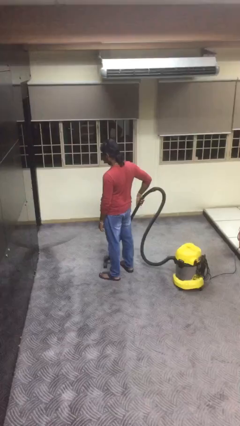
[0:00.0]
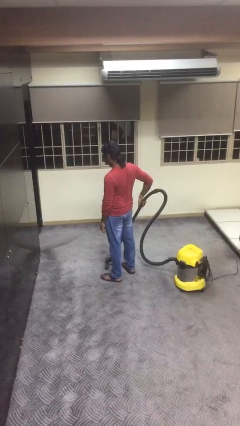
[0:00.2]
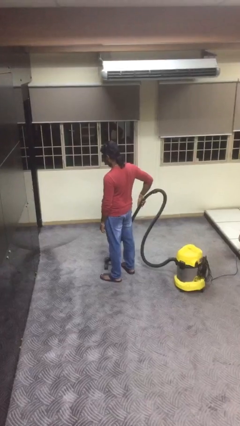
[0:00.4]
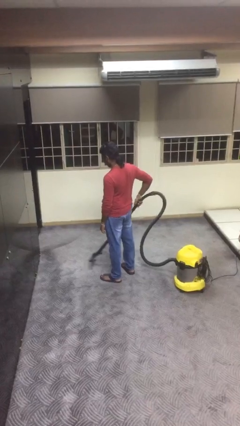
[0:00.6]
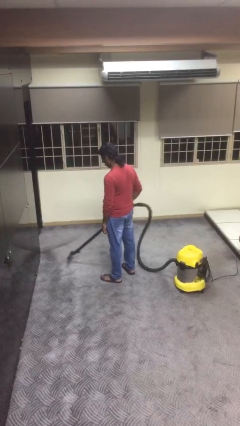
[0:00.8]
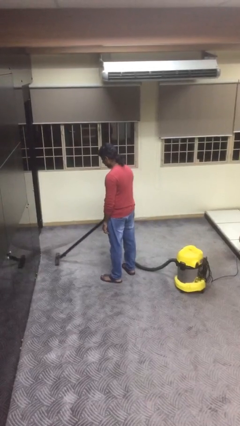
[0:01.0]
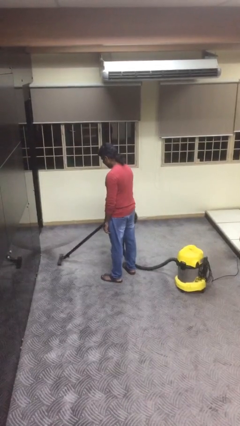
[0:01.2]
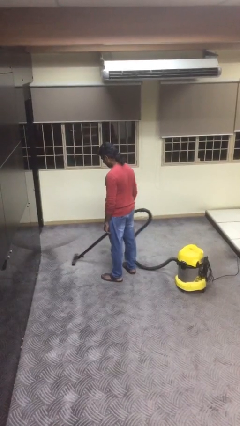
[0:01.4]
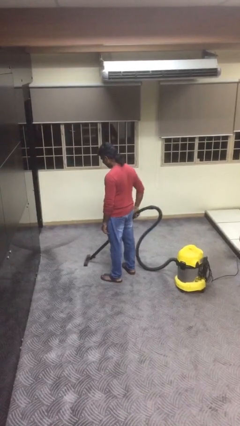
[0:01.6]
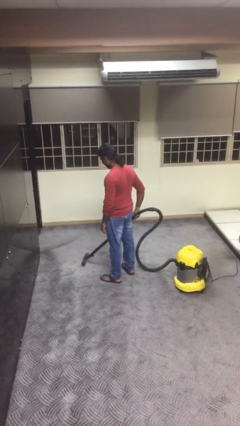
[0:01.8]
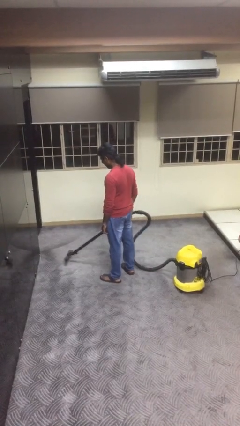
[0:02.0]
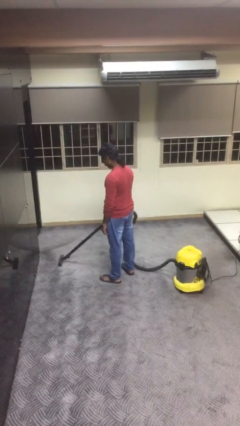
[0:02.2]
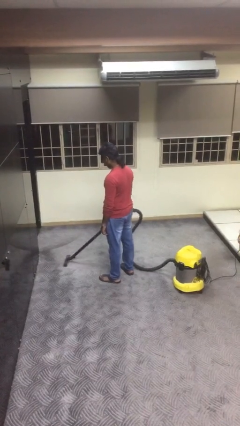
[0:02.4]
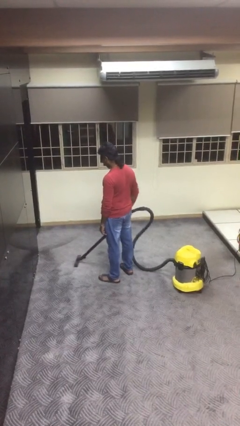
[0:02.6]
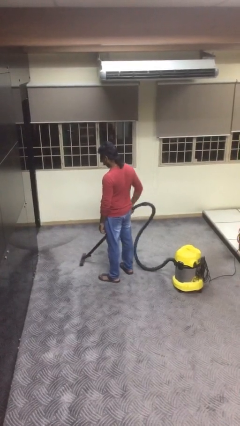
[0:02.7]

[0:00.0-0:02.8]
person vacuums carpet

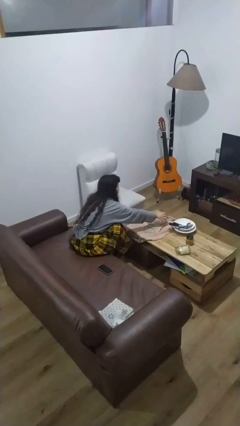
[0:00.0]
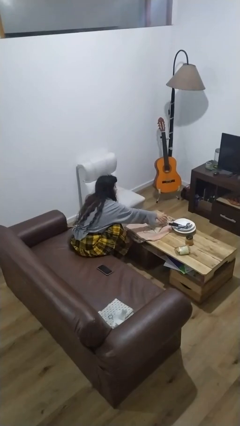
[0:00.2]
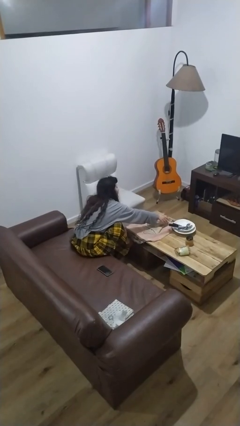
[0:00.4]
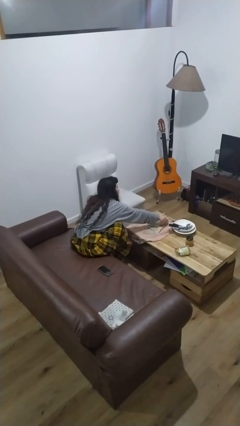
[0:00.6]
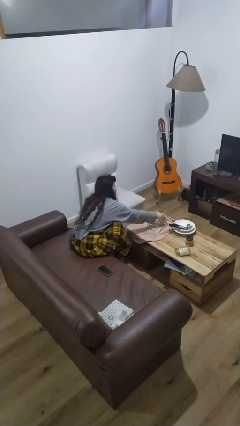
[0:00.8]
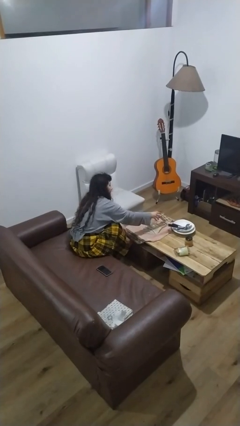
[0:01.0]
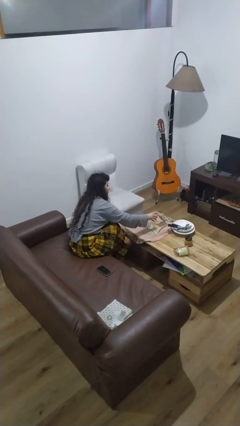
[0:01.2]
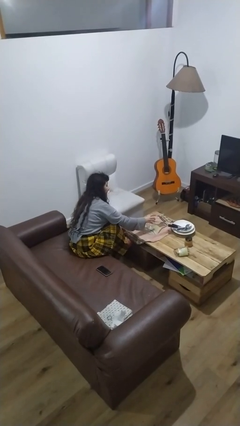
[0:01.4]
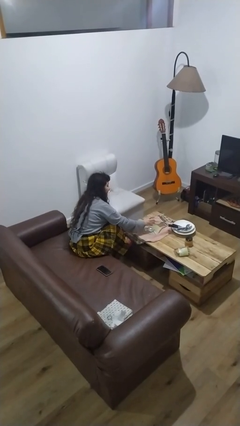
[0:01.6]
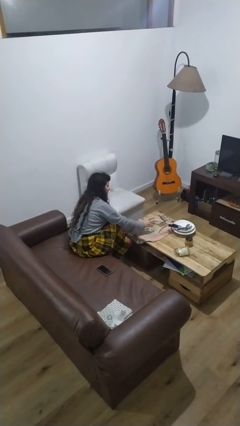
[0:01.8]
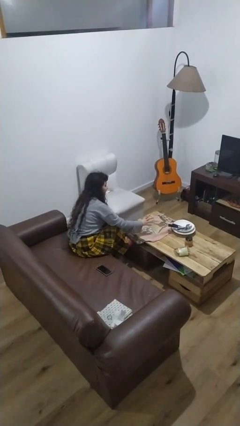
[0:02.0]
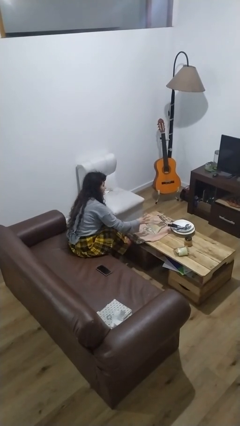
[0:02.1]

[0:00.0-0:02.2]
person sets upright glass

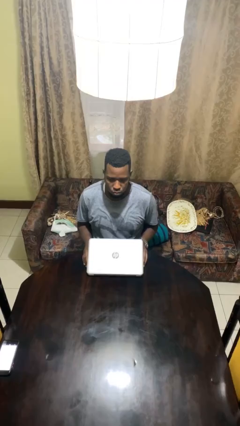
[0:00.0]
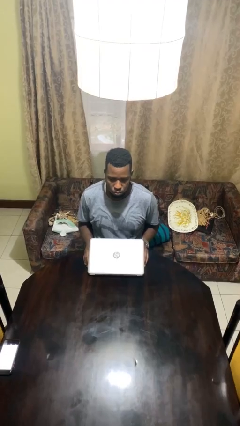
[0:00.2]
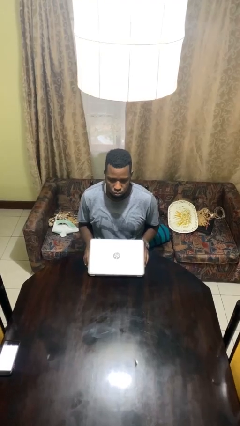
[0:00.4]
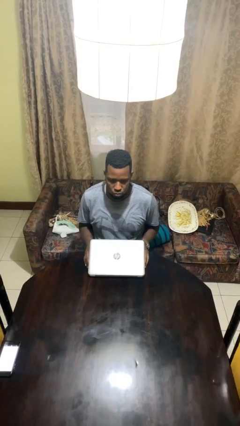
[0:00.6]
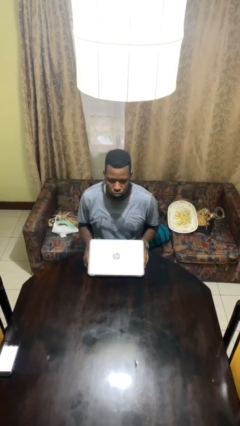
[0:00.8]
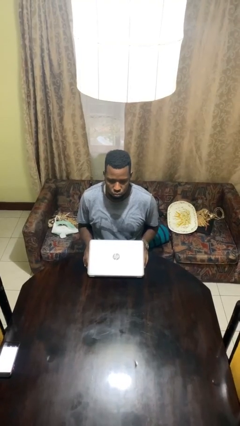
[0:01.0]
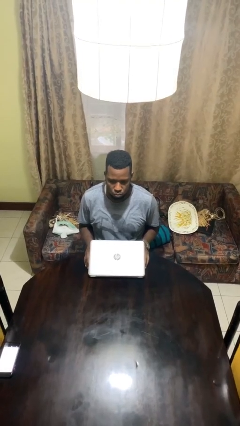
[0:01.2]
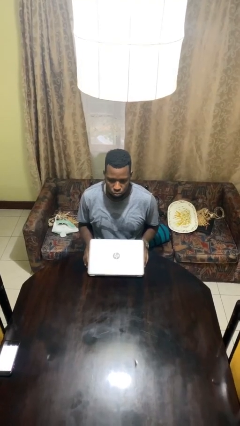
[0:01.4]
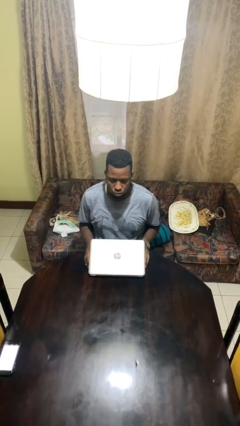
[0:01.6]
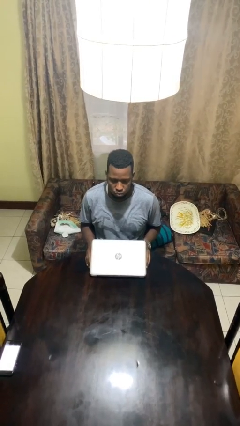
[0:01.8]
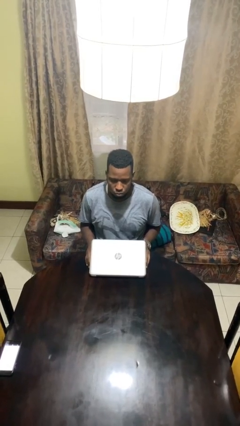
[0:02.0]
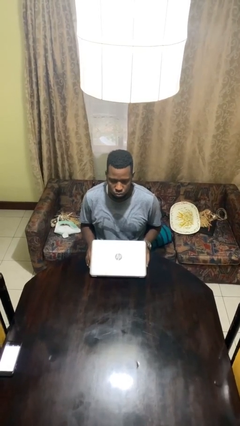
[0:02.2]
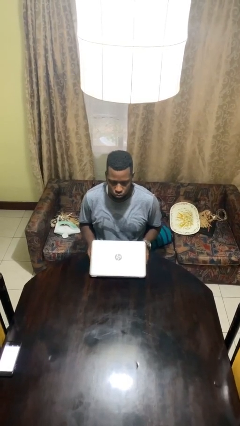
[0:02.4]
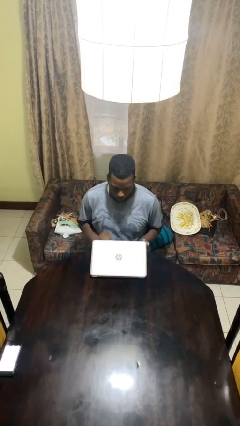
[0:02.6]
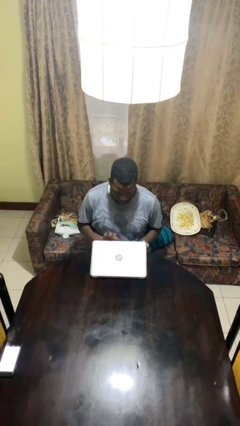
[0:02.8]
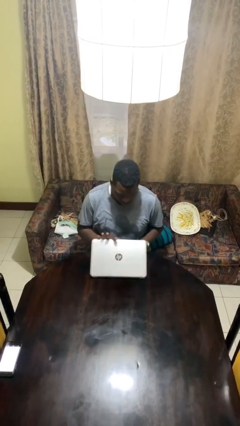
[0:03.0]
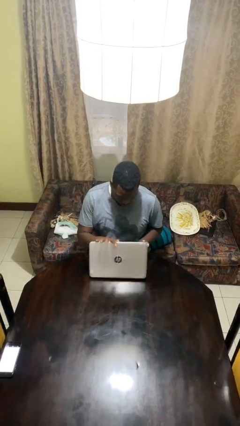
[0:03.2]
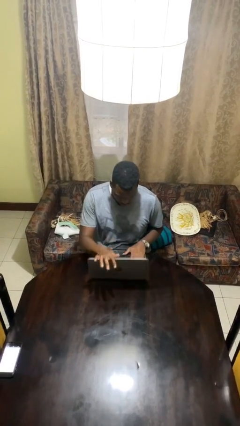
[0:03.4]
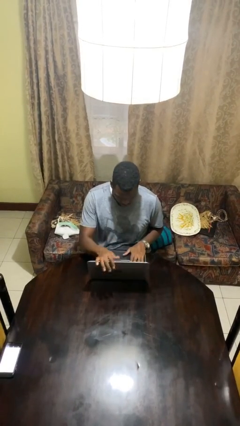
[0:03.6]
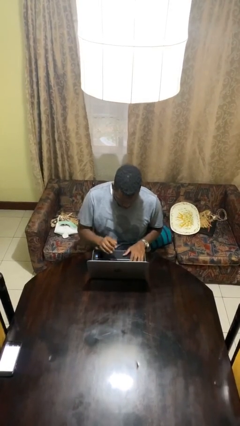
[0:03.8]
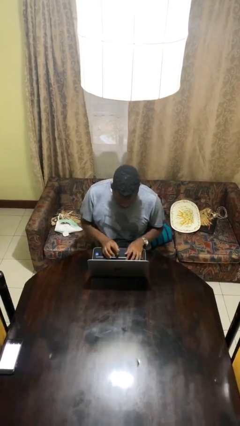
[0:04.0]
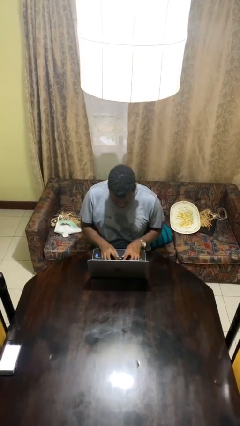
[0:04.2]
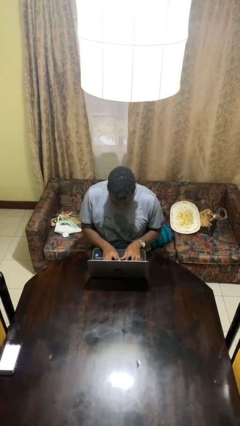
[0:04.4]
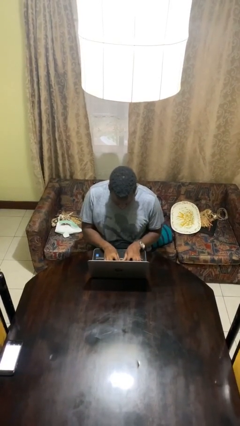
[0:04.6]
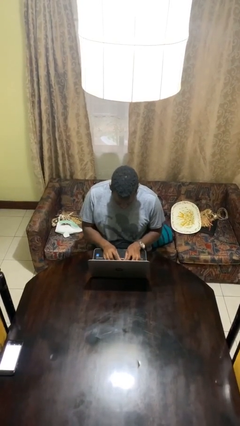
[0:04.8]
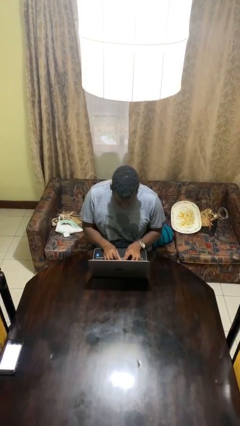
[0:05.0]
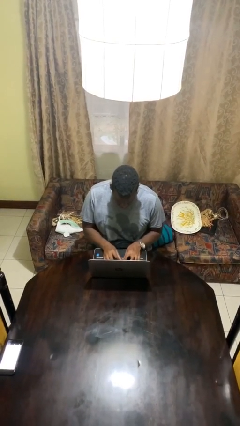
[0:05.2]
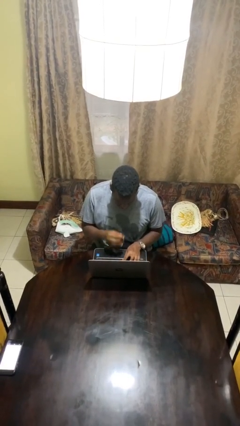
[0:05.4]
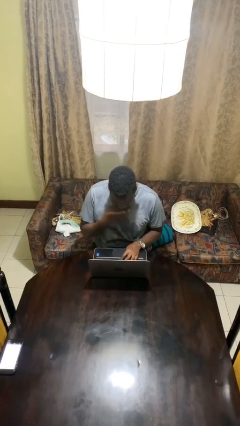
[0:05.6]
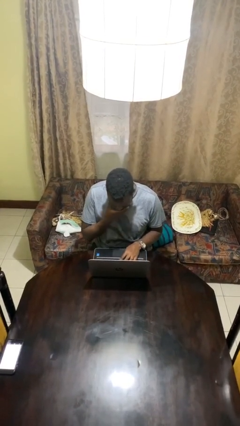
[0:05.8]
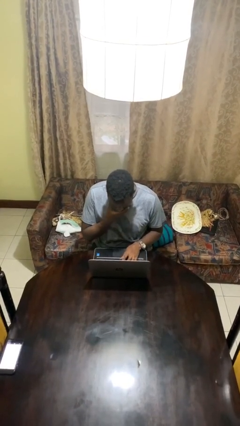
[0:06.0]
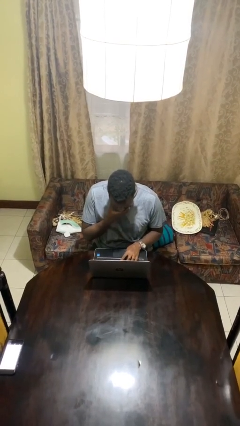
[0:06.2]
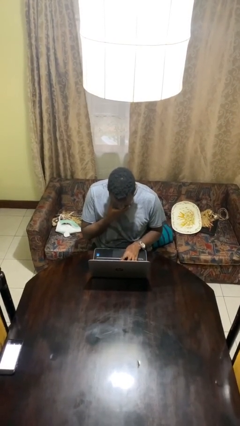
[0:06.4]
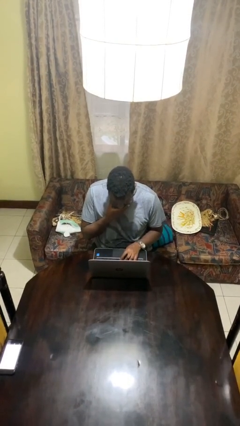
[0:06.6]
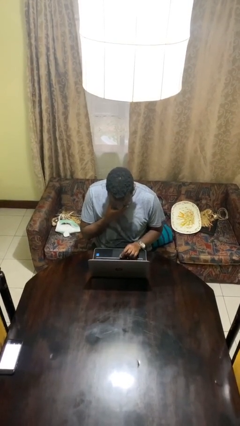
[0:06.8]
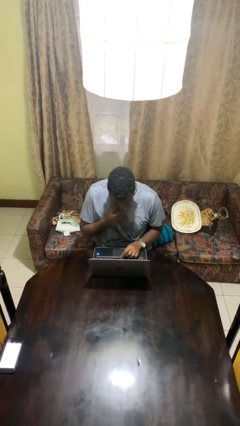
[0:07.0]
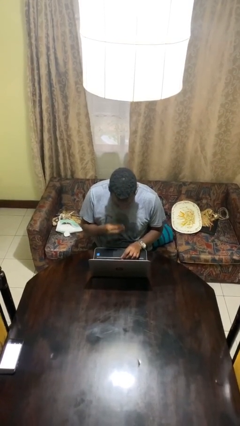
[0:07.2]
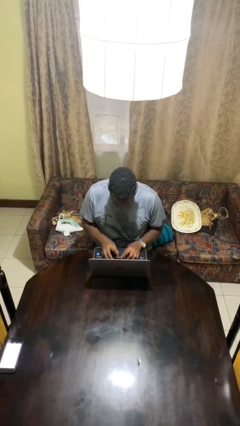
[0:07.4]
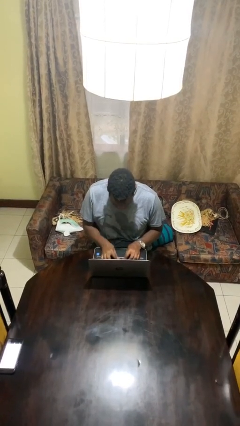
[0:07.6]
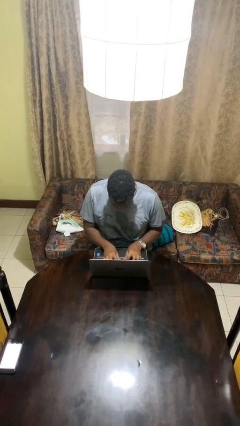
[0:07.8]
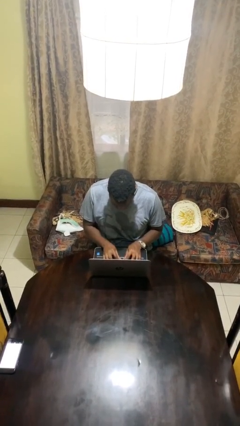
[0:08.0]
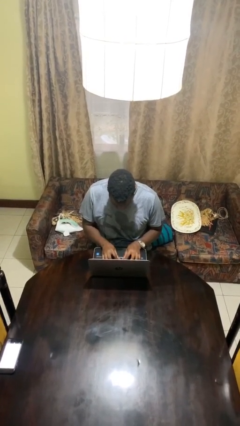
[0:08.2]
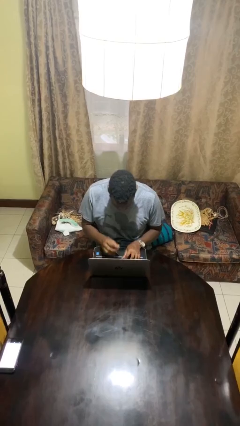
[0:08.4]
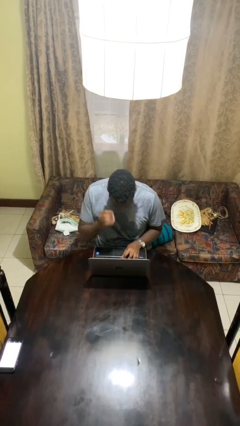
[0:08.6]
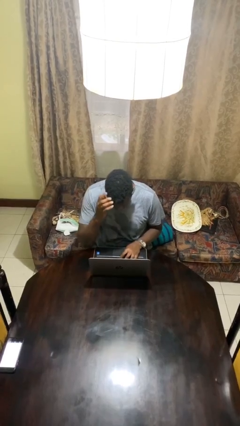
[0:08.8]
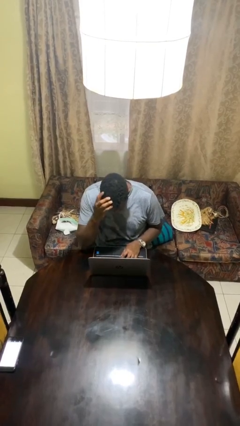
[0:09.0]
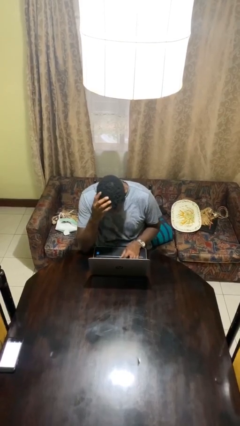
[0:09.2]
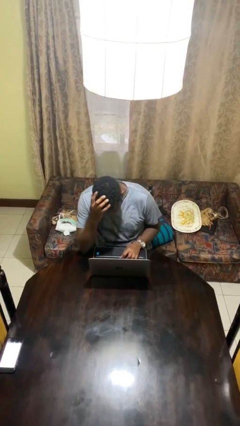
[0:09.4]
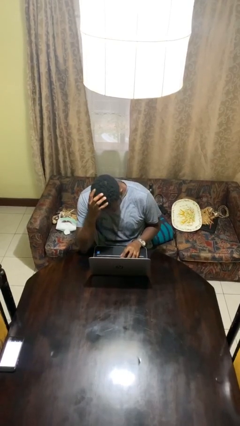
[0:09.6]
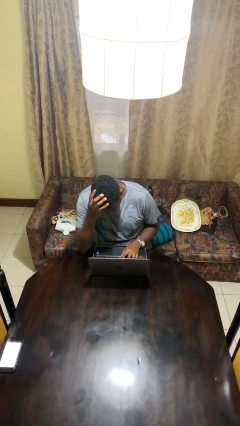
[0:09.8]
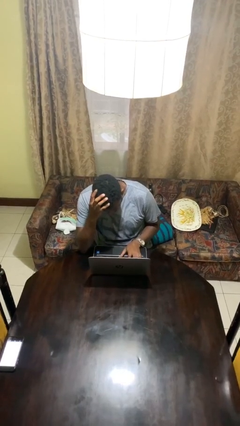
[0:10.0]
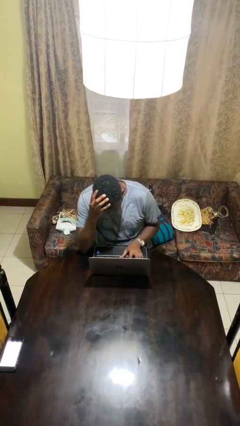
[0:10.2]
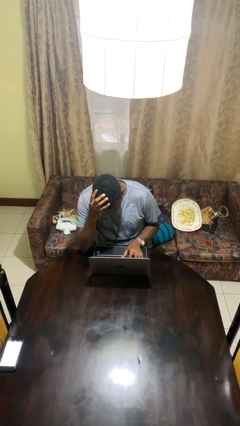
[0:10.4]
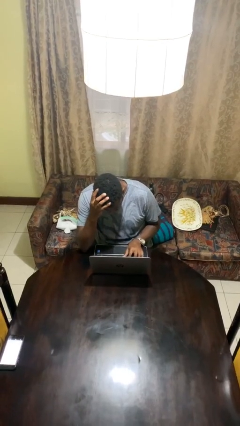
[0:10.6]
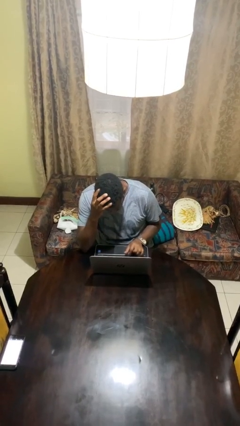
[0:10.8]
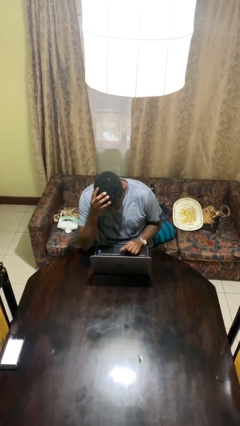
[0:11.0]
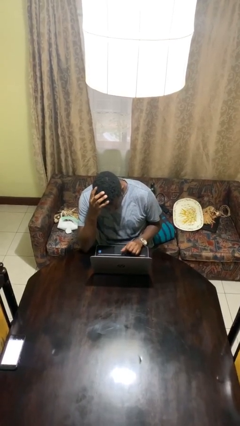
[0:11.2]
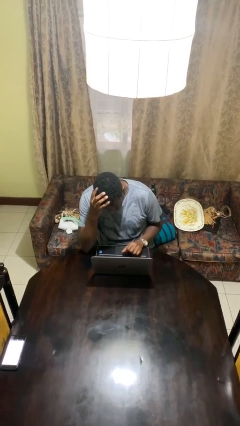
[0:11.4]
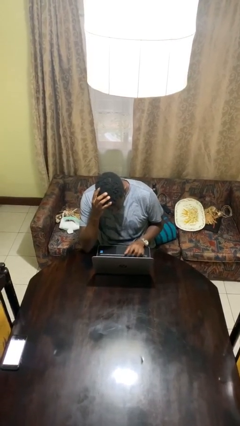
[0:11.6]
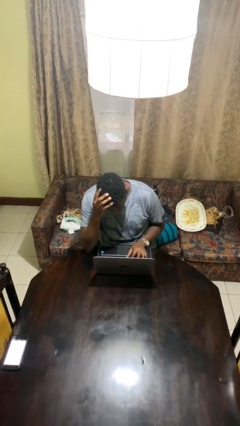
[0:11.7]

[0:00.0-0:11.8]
person interacts with laptop

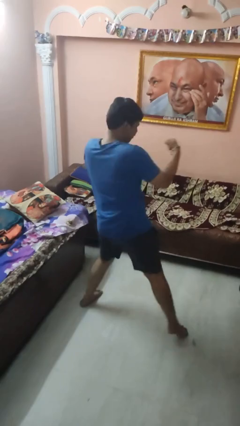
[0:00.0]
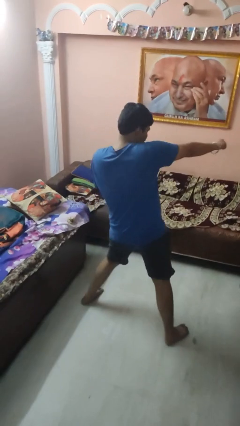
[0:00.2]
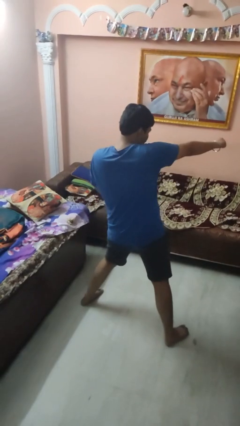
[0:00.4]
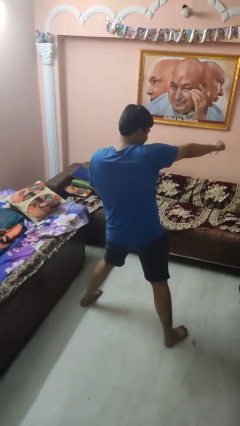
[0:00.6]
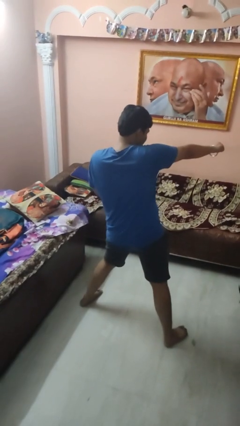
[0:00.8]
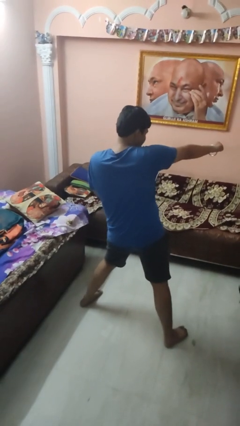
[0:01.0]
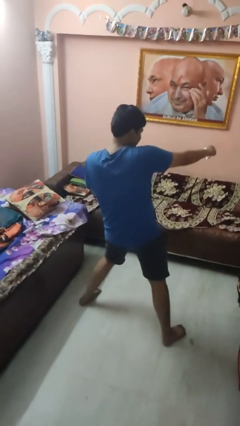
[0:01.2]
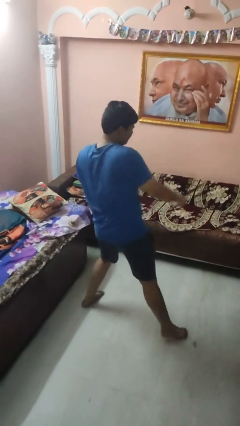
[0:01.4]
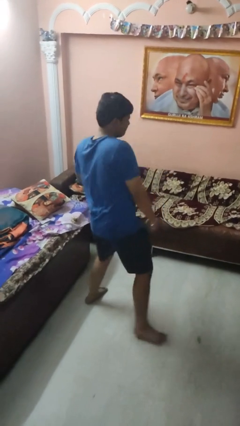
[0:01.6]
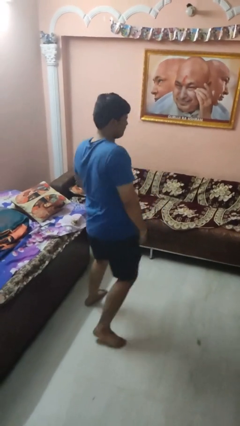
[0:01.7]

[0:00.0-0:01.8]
person punches
